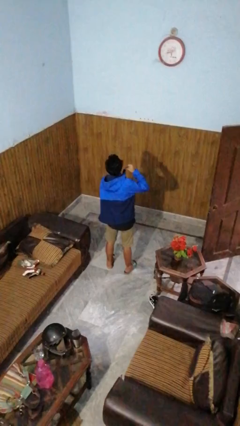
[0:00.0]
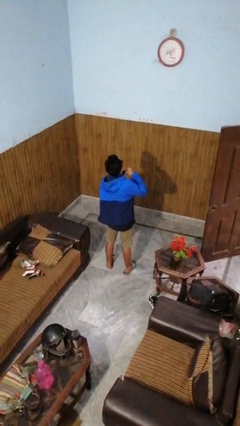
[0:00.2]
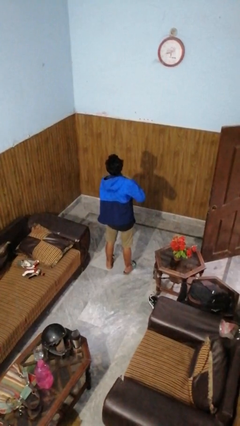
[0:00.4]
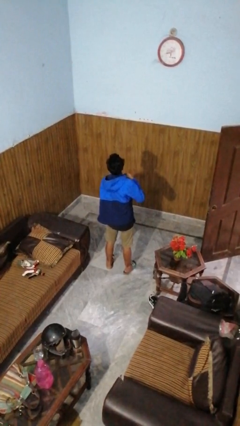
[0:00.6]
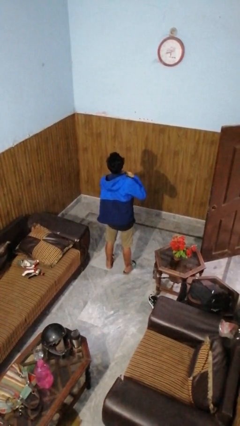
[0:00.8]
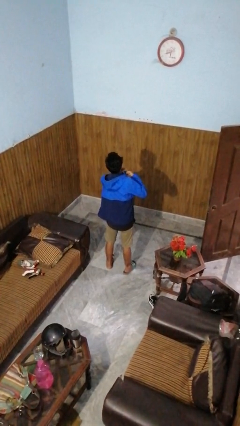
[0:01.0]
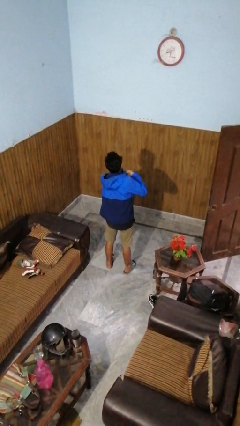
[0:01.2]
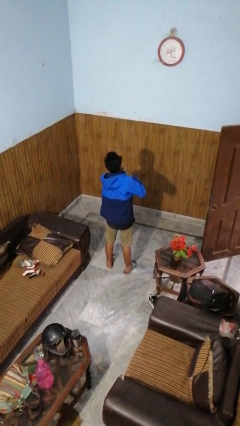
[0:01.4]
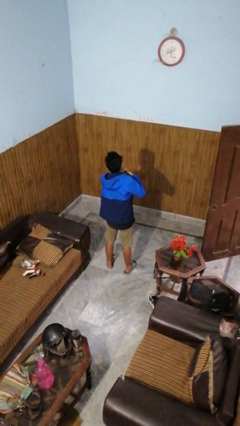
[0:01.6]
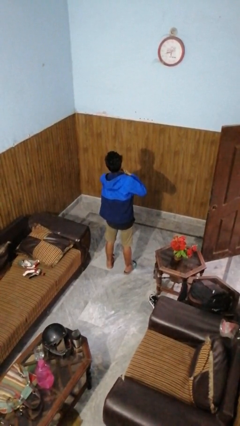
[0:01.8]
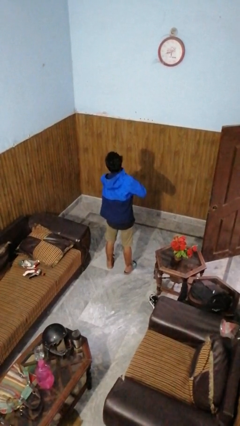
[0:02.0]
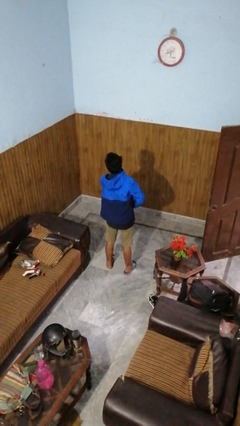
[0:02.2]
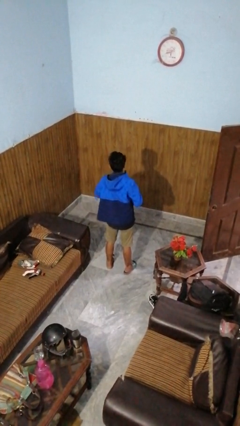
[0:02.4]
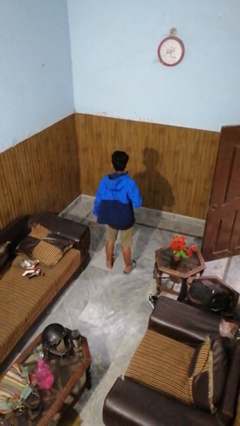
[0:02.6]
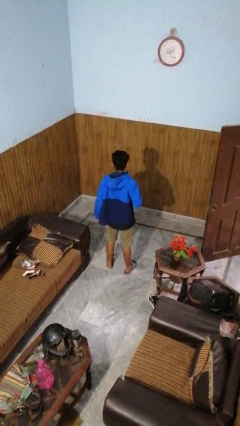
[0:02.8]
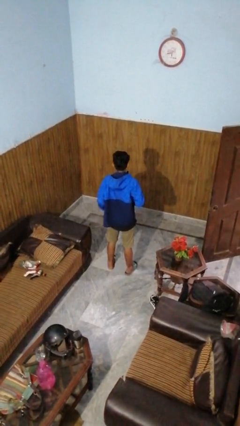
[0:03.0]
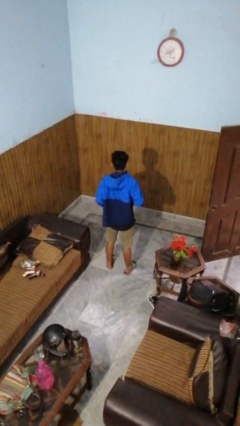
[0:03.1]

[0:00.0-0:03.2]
person unzips jacket

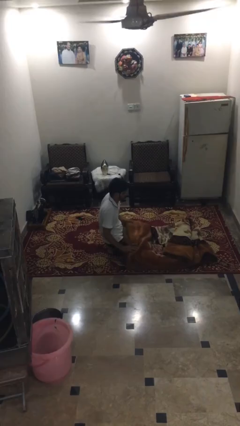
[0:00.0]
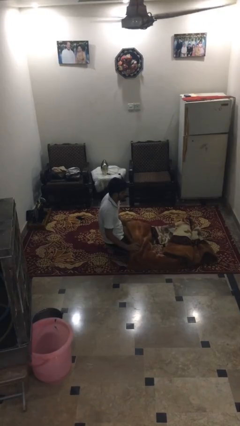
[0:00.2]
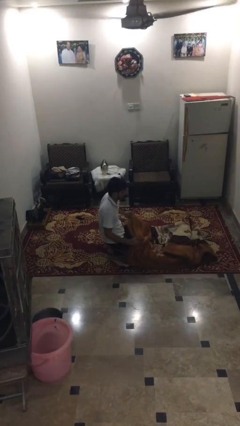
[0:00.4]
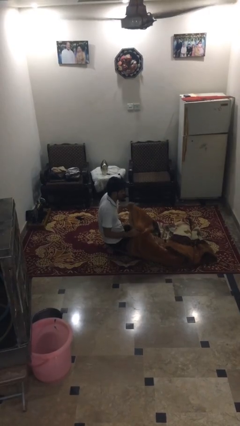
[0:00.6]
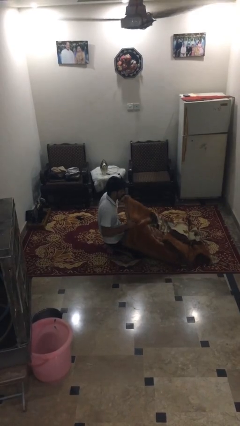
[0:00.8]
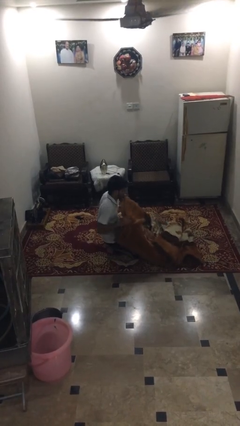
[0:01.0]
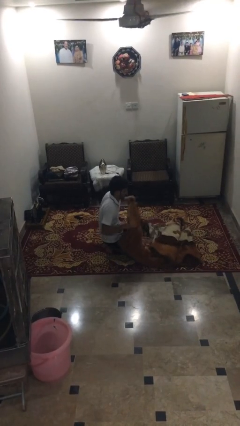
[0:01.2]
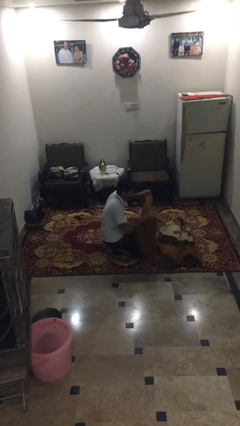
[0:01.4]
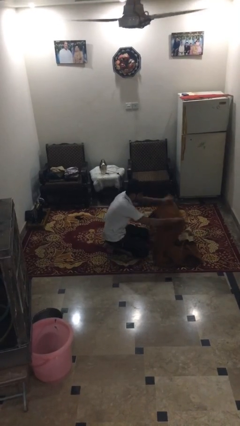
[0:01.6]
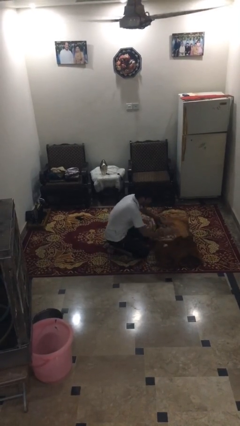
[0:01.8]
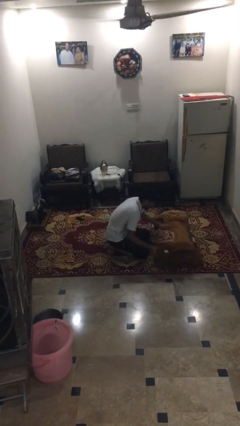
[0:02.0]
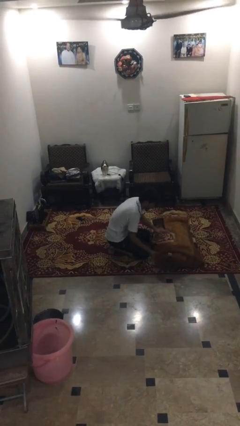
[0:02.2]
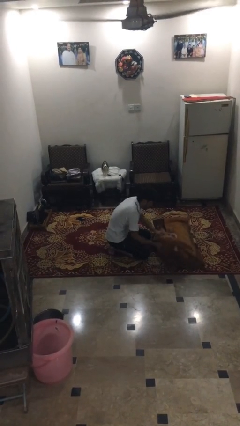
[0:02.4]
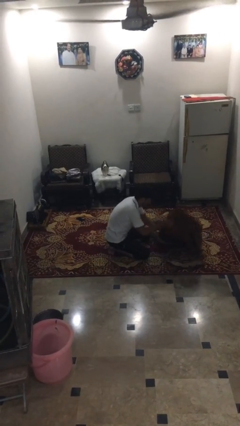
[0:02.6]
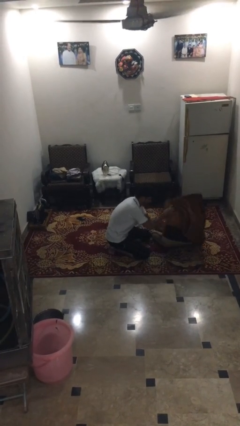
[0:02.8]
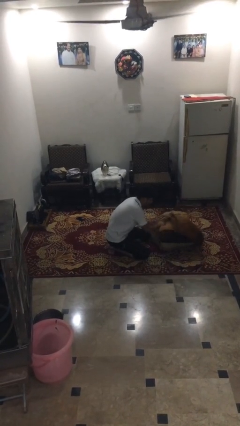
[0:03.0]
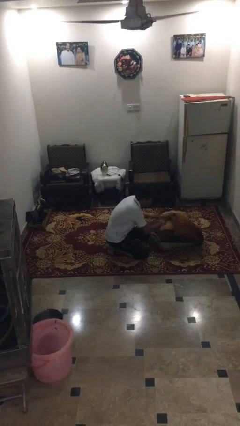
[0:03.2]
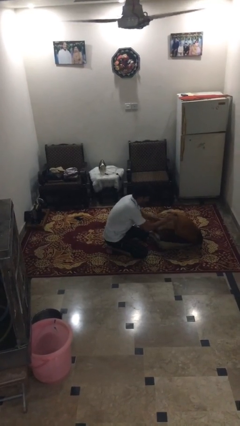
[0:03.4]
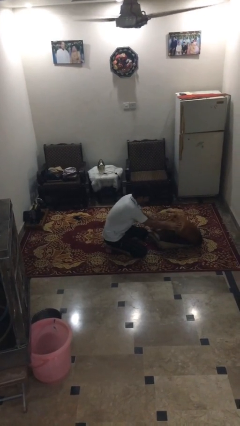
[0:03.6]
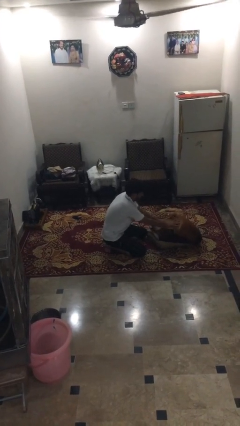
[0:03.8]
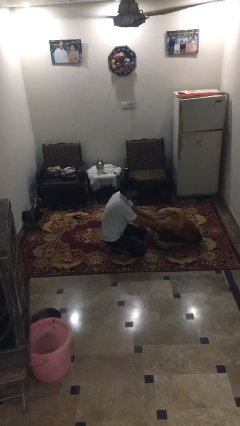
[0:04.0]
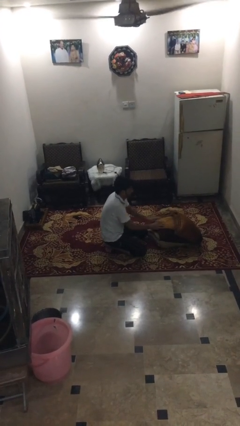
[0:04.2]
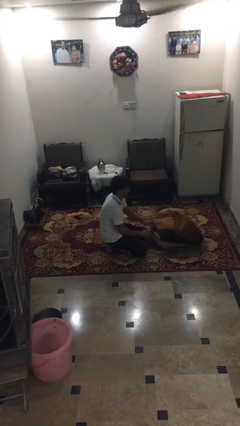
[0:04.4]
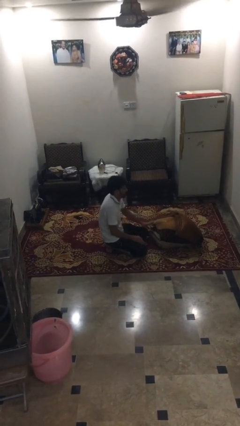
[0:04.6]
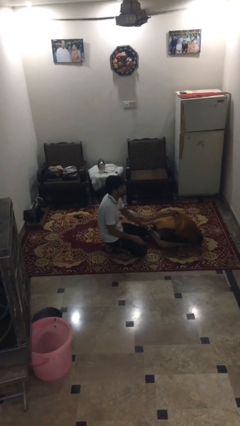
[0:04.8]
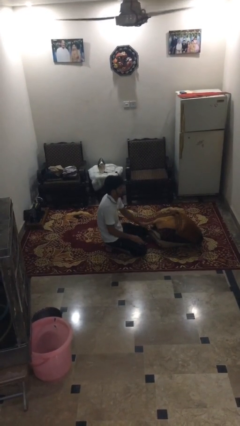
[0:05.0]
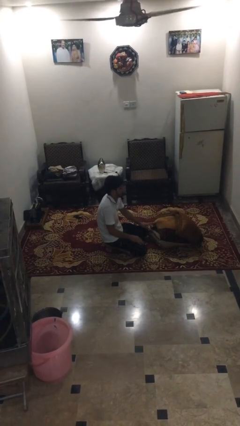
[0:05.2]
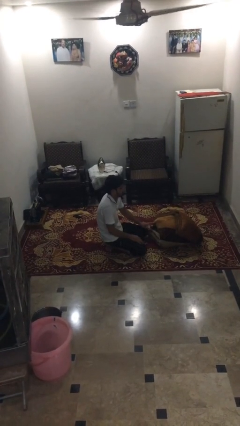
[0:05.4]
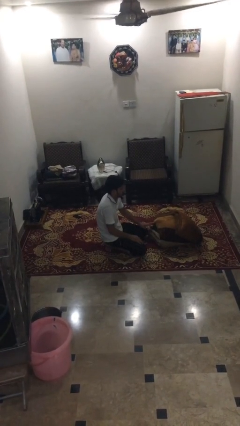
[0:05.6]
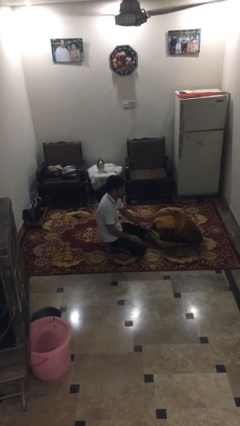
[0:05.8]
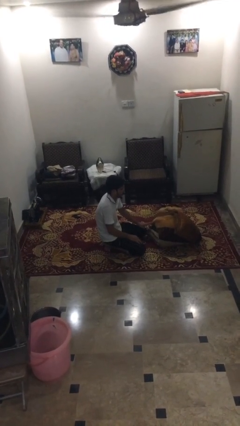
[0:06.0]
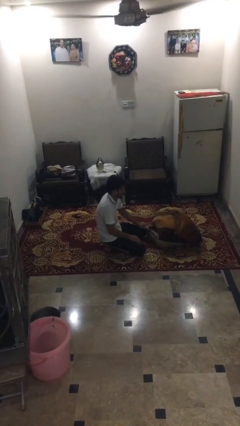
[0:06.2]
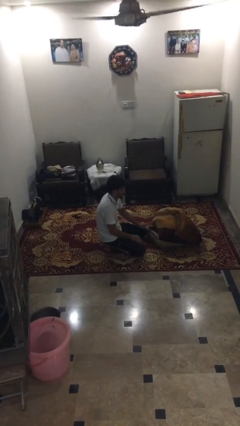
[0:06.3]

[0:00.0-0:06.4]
person folds blanket

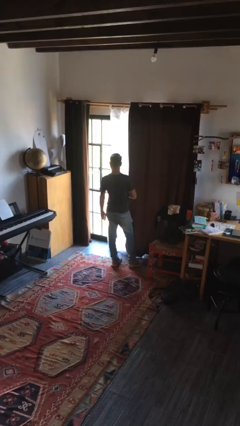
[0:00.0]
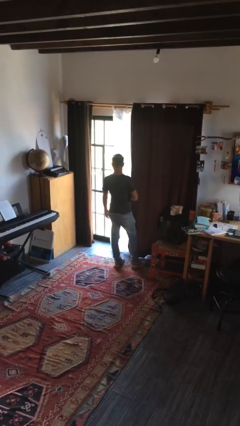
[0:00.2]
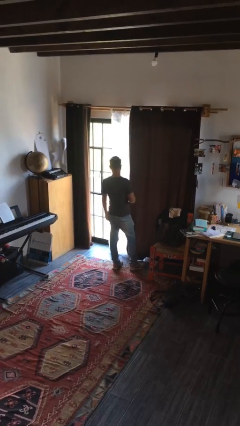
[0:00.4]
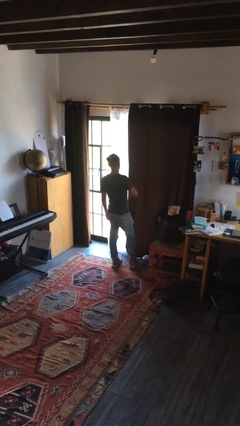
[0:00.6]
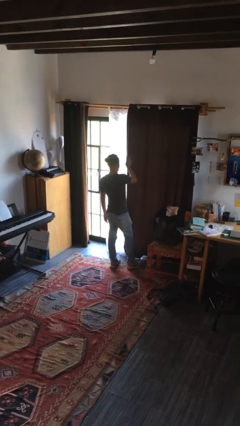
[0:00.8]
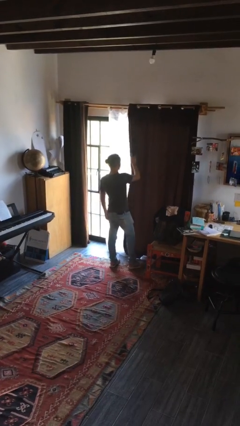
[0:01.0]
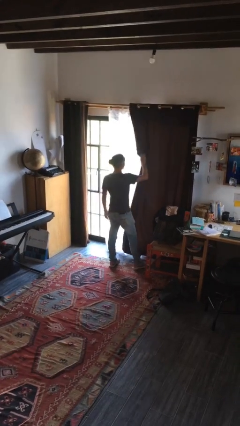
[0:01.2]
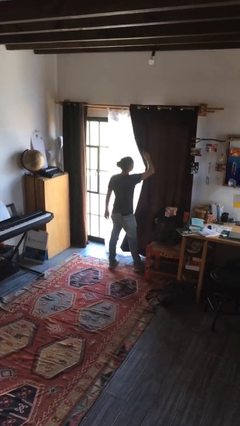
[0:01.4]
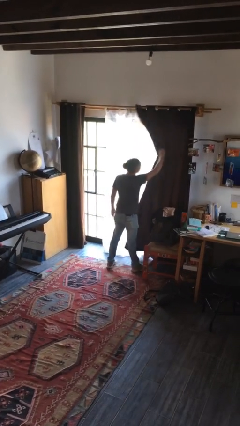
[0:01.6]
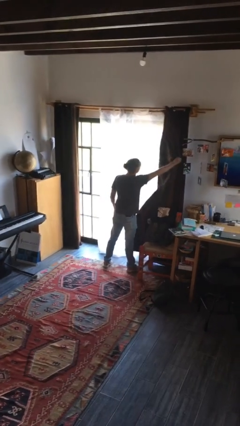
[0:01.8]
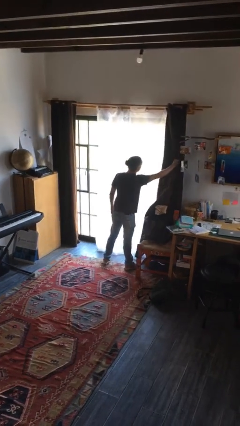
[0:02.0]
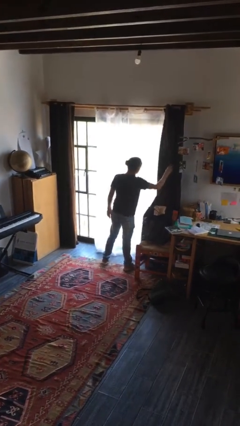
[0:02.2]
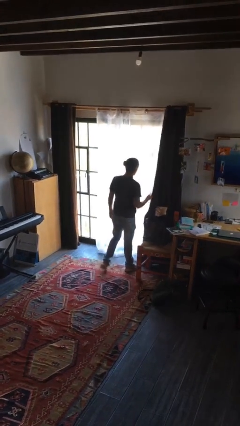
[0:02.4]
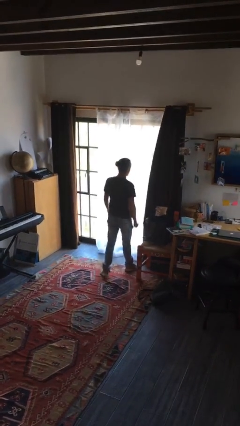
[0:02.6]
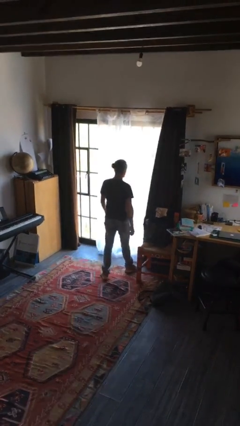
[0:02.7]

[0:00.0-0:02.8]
person opens curtains

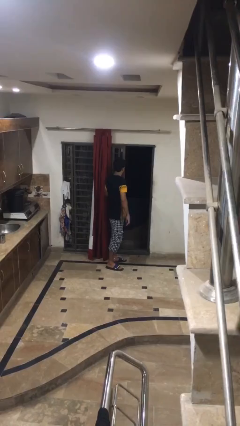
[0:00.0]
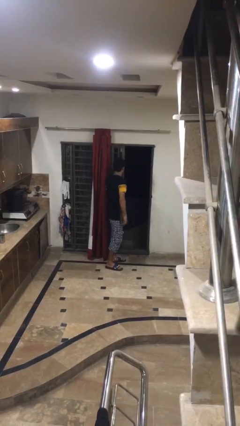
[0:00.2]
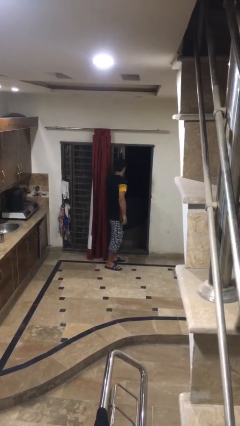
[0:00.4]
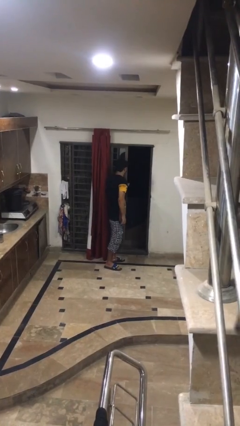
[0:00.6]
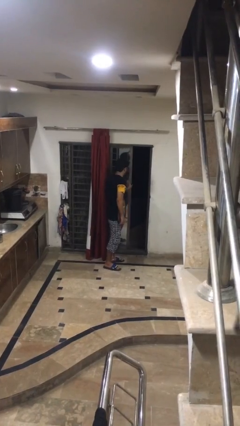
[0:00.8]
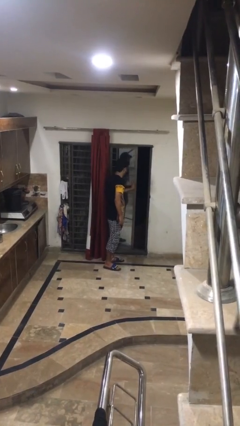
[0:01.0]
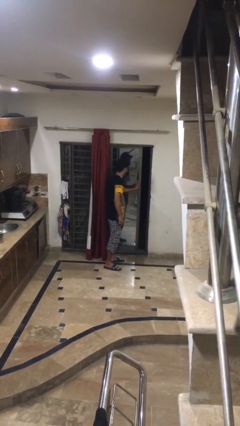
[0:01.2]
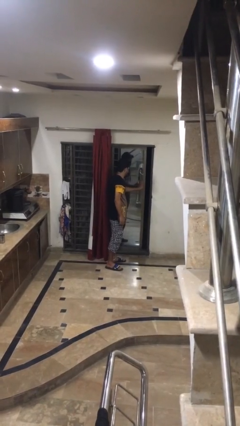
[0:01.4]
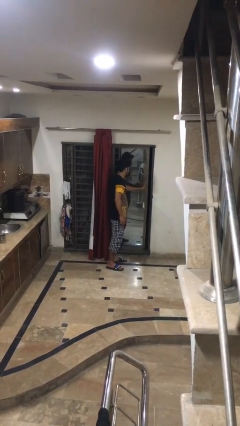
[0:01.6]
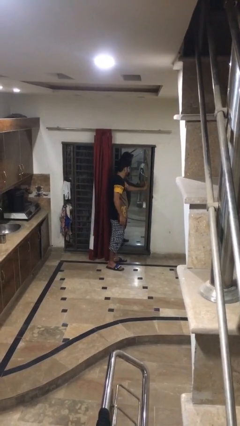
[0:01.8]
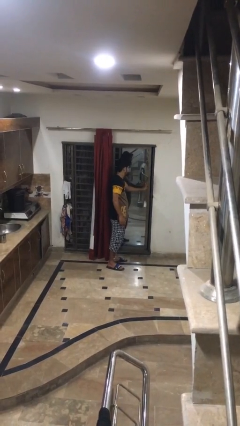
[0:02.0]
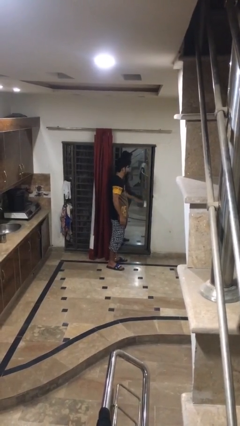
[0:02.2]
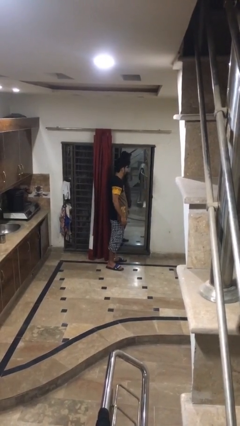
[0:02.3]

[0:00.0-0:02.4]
person closes home window

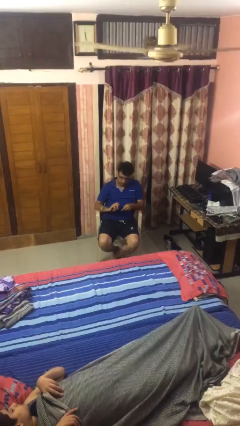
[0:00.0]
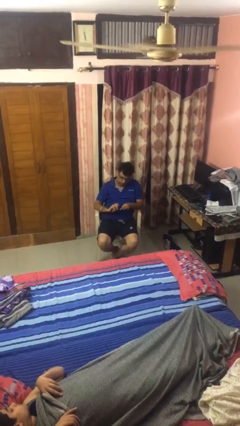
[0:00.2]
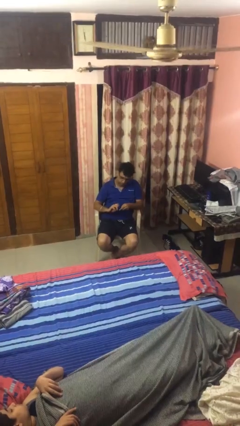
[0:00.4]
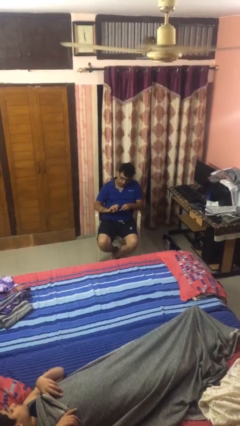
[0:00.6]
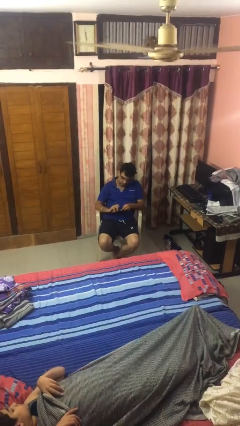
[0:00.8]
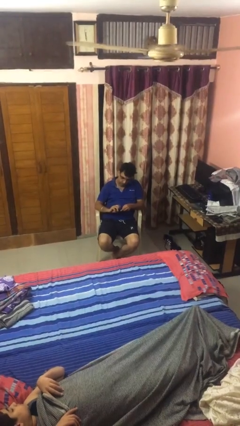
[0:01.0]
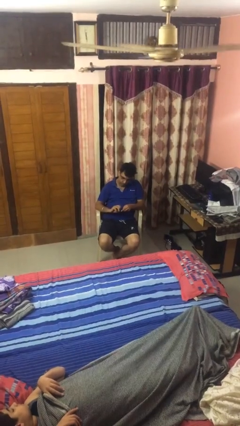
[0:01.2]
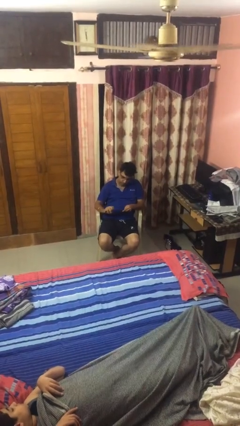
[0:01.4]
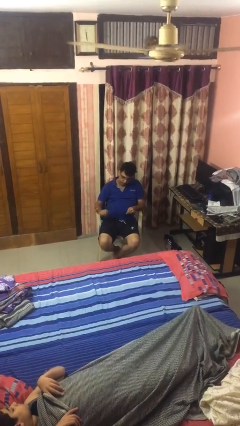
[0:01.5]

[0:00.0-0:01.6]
person files fingernails

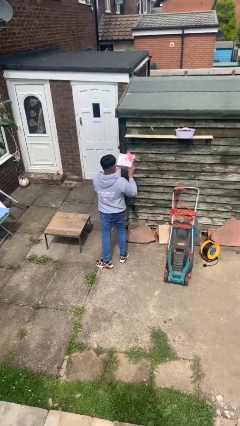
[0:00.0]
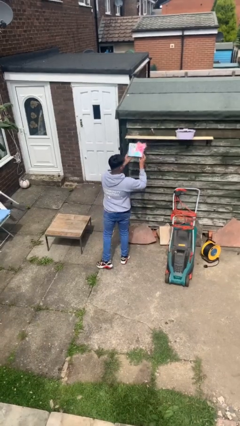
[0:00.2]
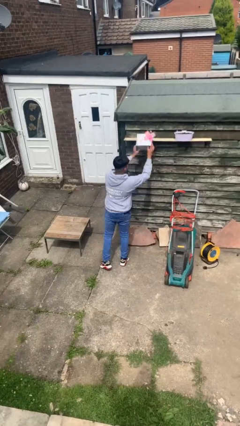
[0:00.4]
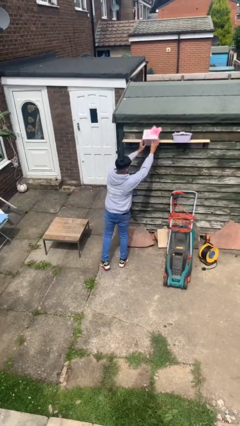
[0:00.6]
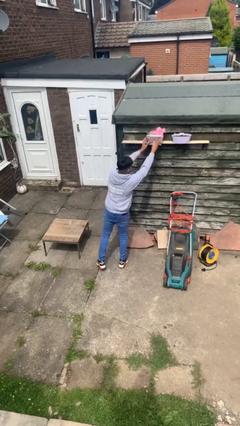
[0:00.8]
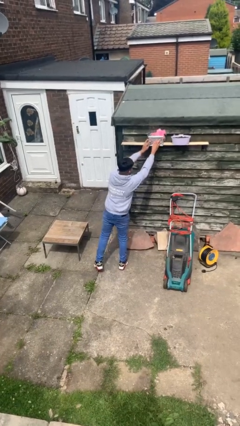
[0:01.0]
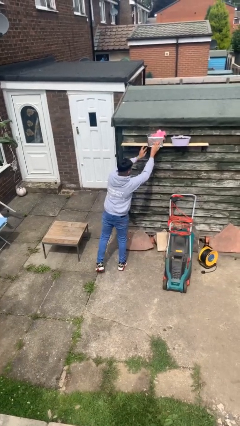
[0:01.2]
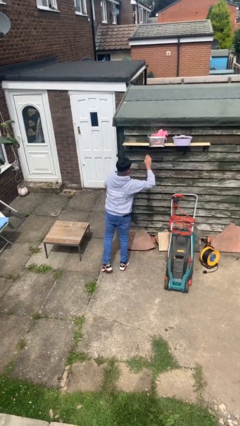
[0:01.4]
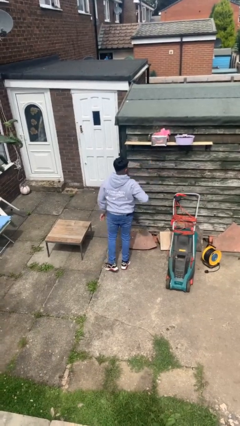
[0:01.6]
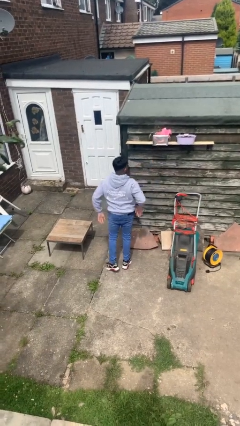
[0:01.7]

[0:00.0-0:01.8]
person puts down object on shelf
